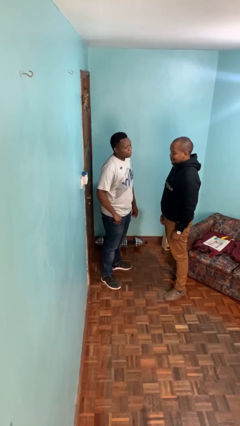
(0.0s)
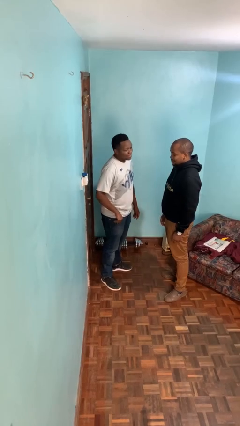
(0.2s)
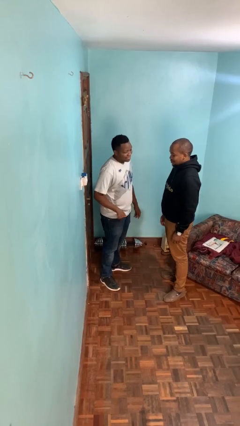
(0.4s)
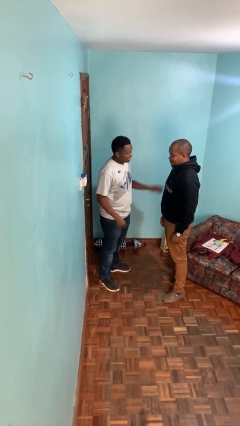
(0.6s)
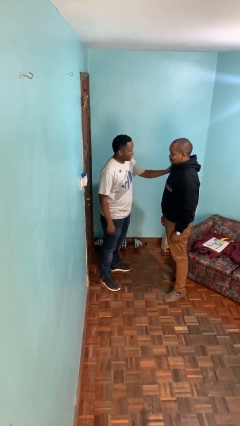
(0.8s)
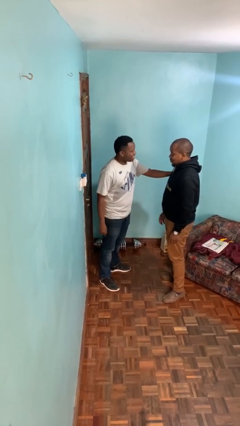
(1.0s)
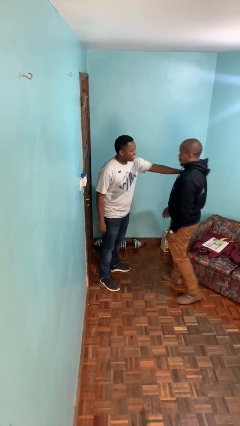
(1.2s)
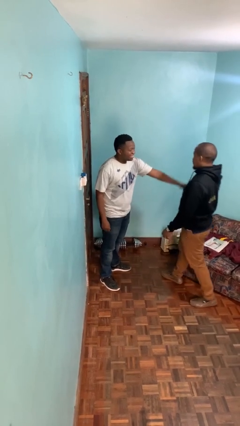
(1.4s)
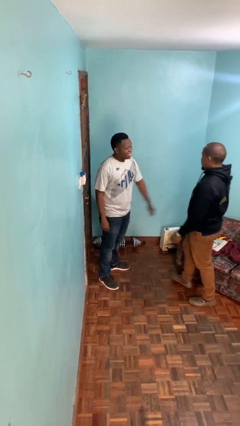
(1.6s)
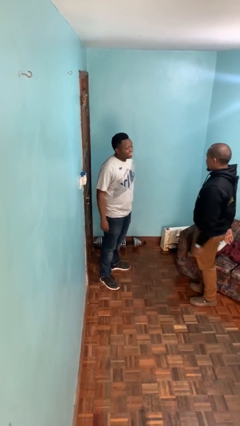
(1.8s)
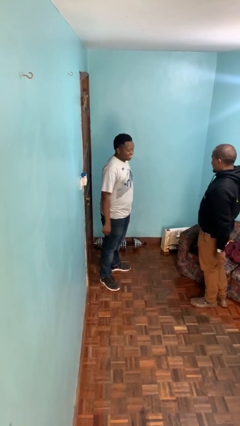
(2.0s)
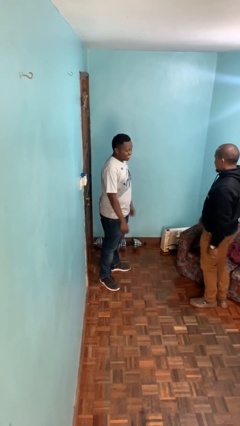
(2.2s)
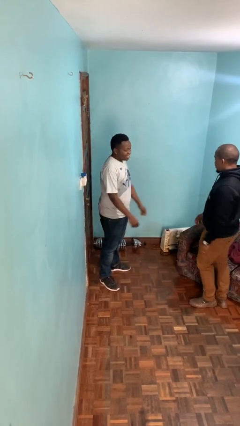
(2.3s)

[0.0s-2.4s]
person shoves person

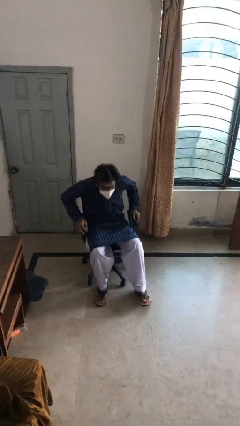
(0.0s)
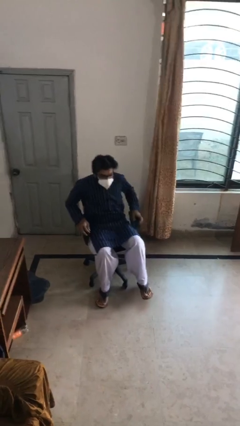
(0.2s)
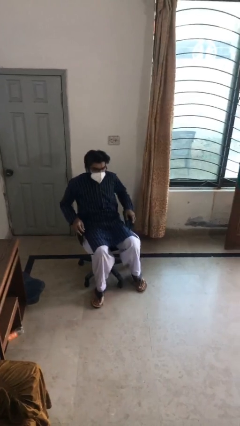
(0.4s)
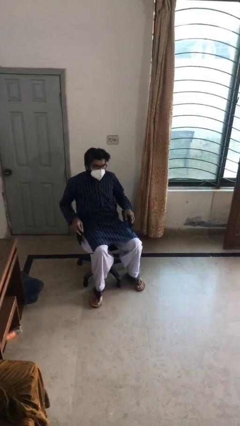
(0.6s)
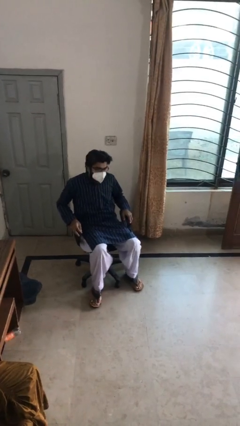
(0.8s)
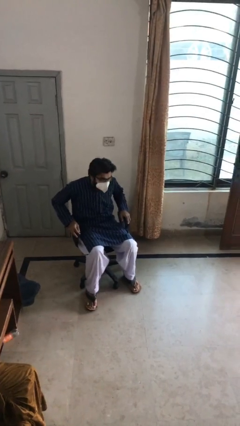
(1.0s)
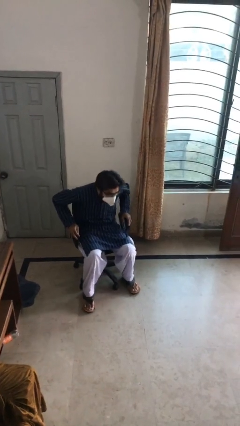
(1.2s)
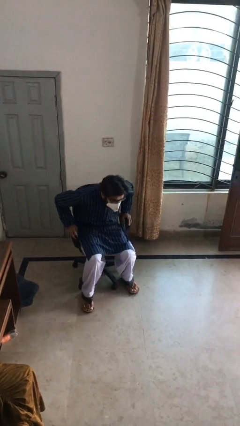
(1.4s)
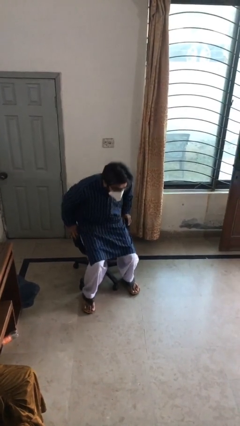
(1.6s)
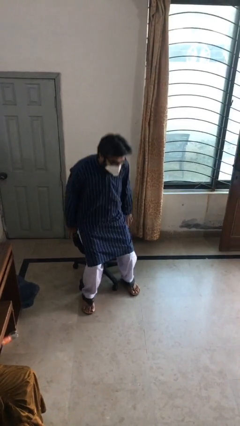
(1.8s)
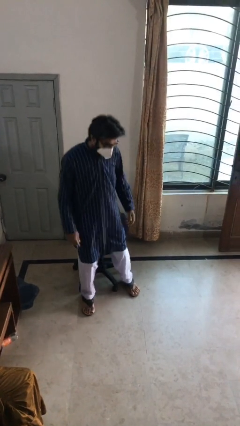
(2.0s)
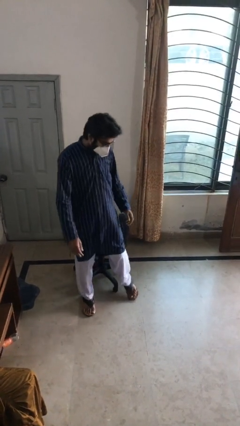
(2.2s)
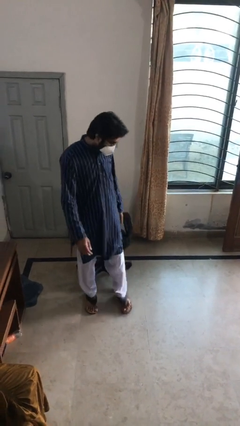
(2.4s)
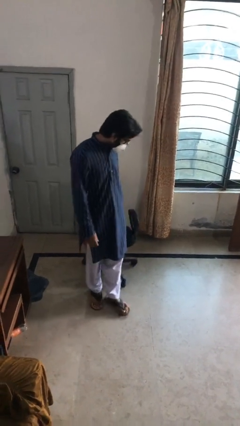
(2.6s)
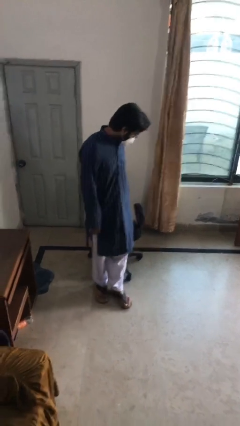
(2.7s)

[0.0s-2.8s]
person stands up

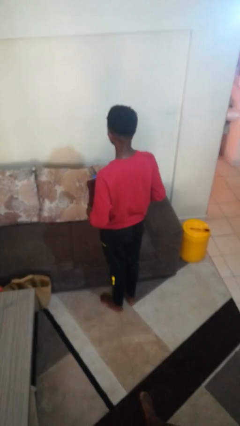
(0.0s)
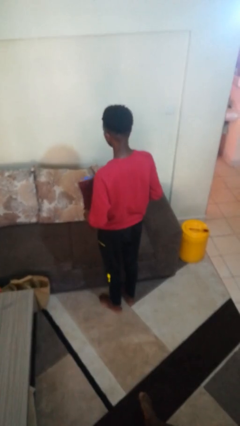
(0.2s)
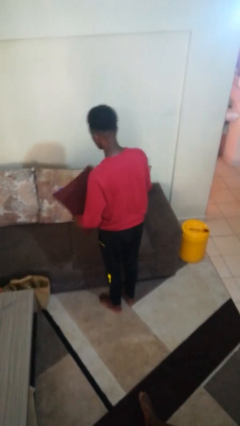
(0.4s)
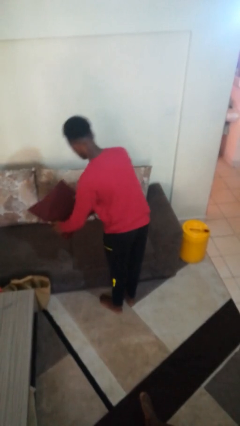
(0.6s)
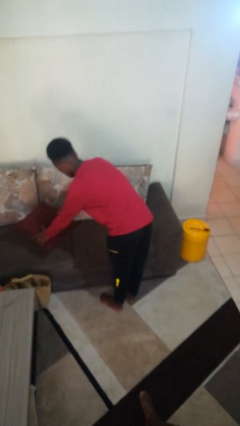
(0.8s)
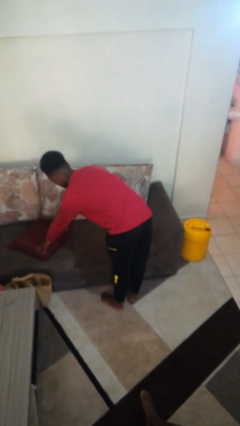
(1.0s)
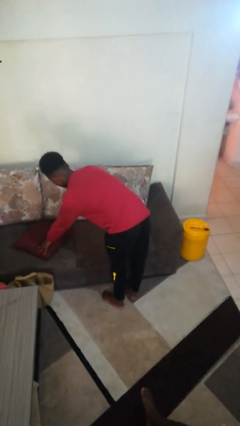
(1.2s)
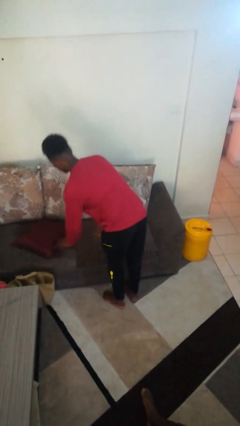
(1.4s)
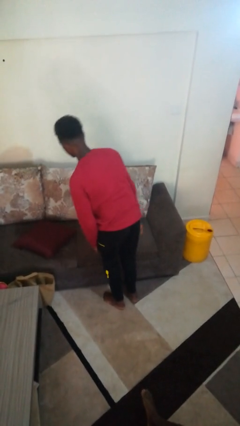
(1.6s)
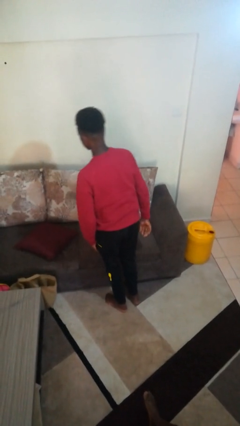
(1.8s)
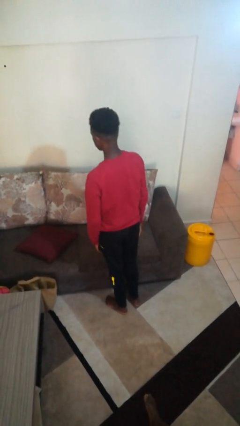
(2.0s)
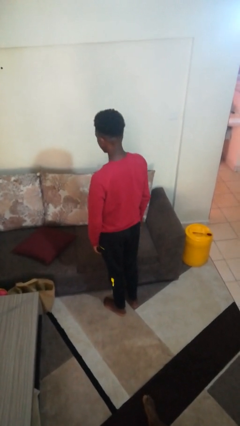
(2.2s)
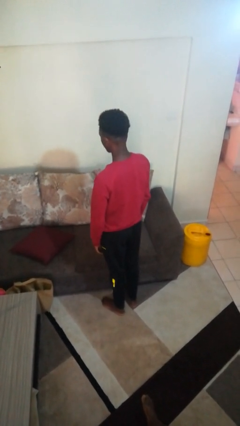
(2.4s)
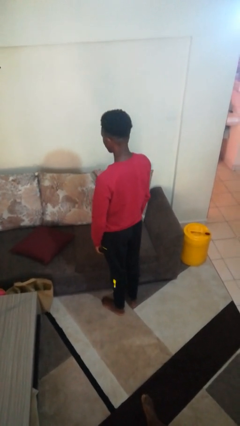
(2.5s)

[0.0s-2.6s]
person puts down object on couch

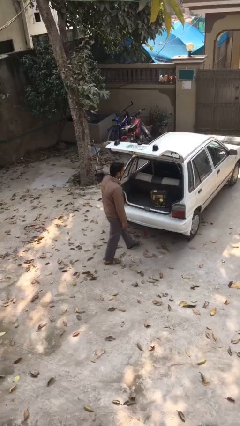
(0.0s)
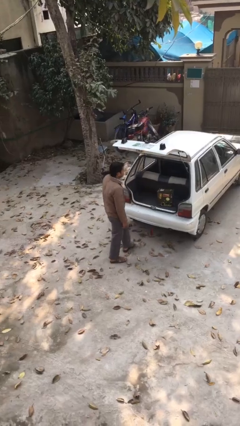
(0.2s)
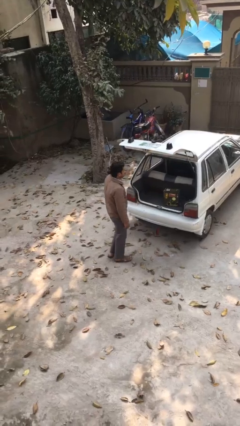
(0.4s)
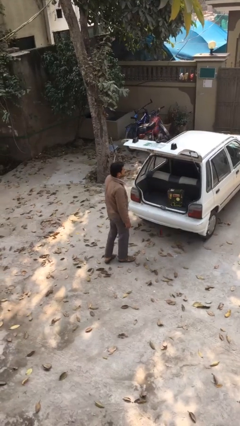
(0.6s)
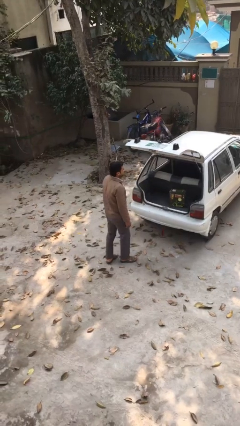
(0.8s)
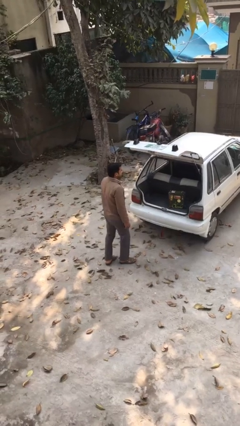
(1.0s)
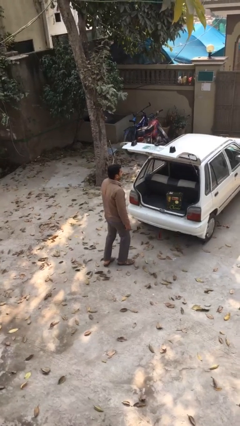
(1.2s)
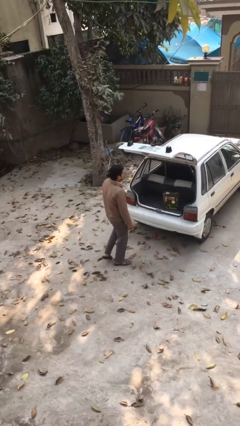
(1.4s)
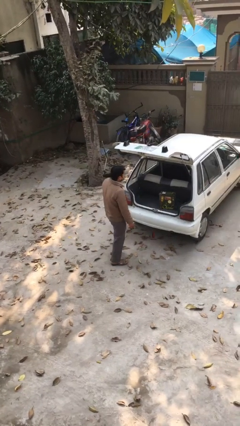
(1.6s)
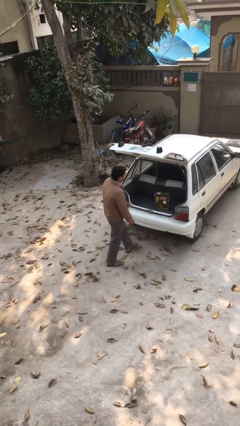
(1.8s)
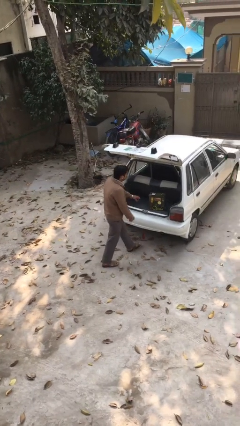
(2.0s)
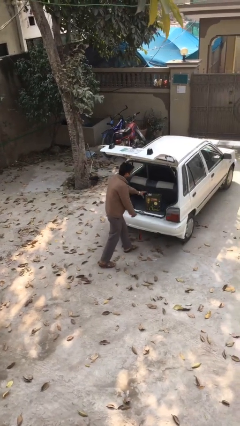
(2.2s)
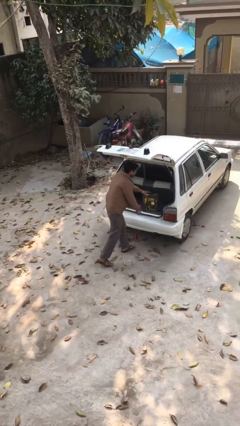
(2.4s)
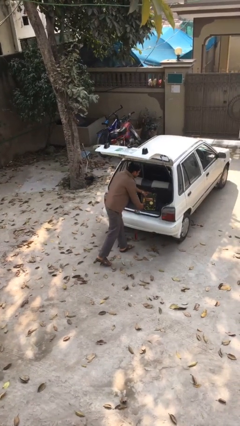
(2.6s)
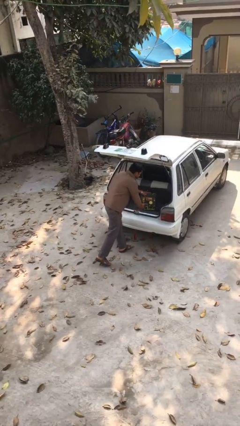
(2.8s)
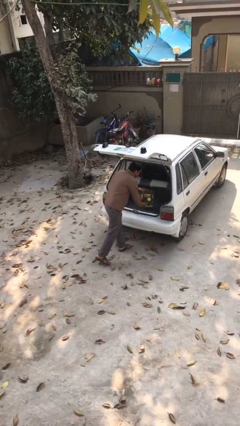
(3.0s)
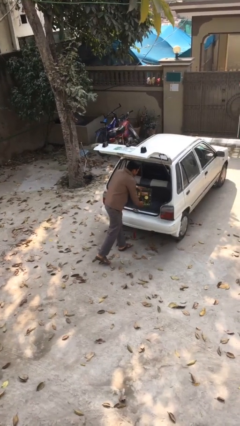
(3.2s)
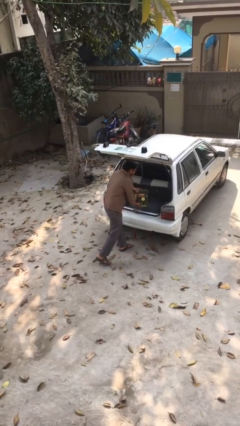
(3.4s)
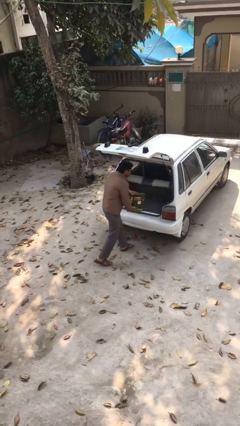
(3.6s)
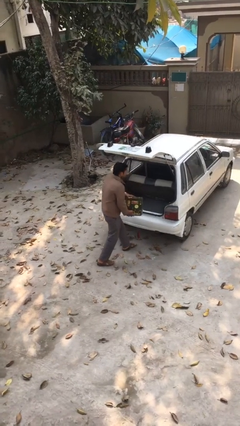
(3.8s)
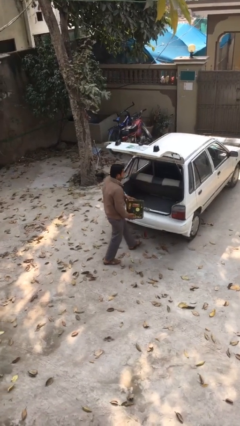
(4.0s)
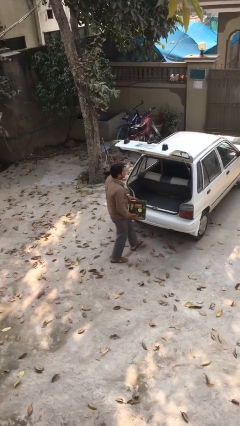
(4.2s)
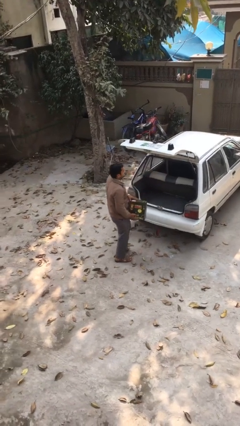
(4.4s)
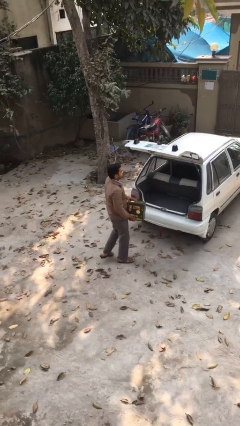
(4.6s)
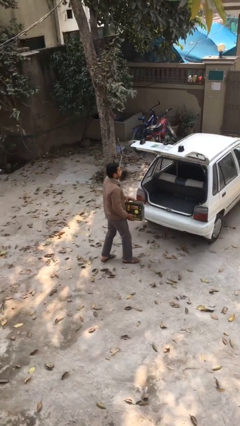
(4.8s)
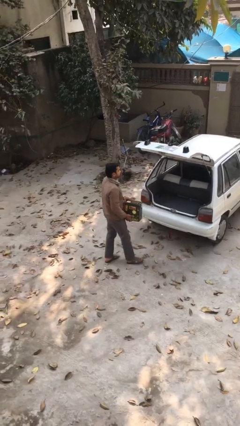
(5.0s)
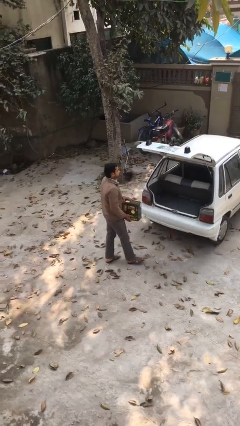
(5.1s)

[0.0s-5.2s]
person unloads car

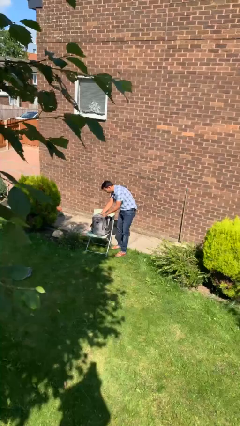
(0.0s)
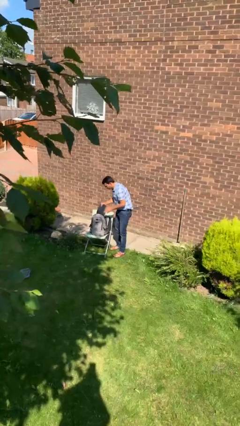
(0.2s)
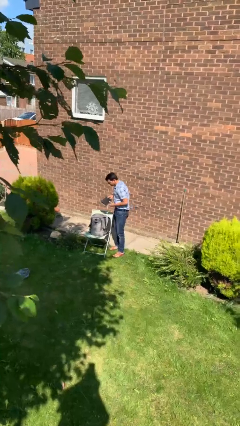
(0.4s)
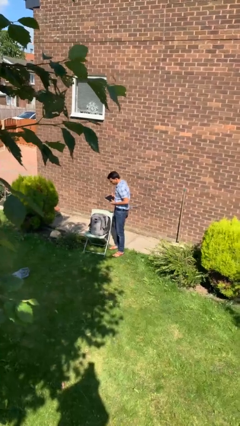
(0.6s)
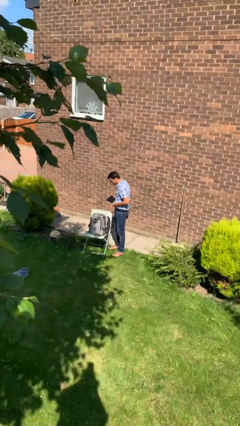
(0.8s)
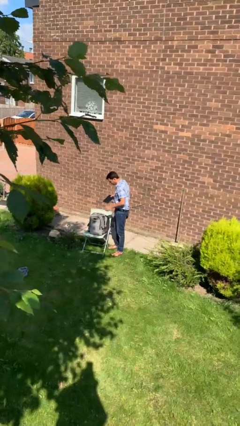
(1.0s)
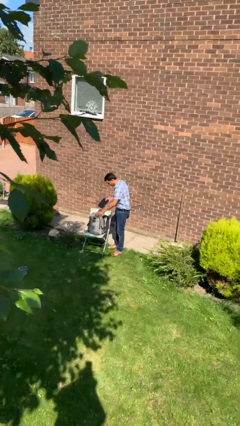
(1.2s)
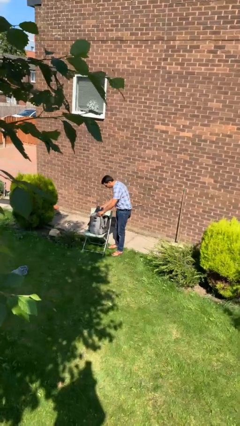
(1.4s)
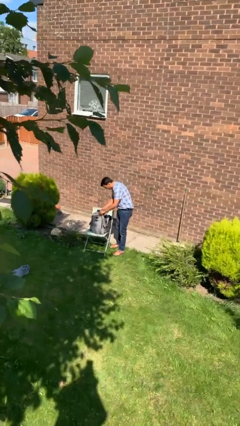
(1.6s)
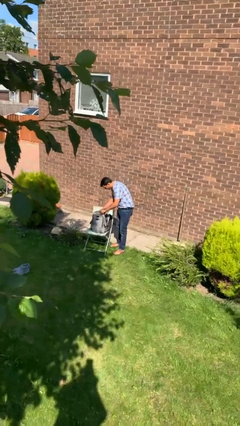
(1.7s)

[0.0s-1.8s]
person puts object into backpack

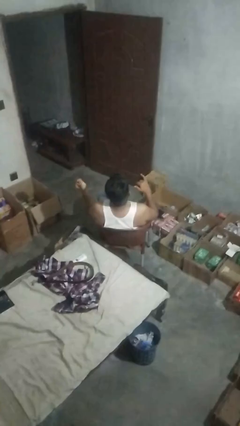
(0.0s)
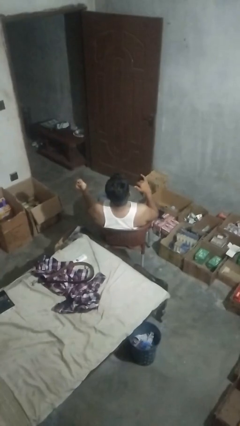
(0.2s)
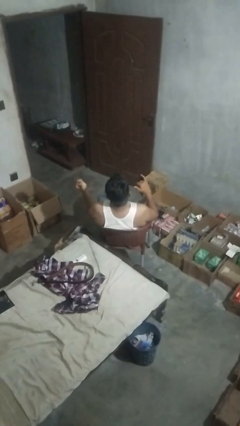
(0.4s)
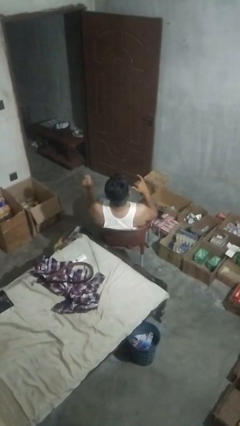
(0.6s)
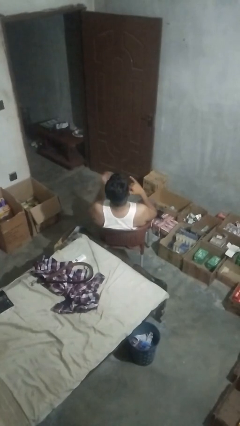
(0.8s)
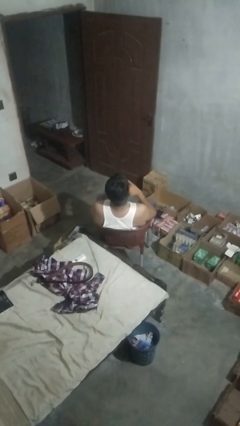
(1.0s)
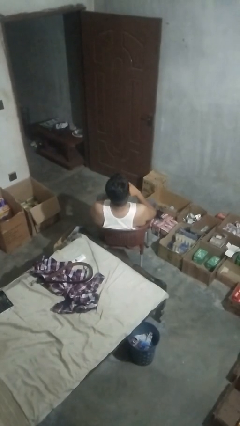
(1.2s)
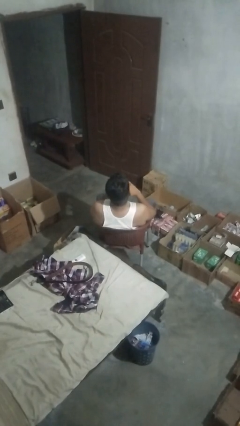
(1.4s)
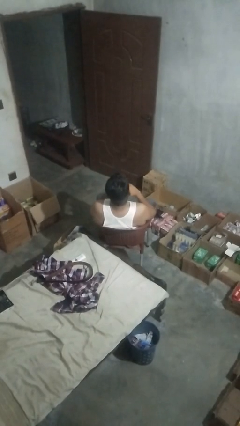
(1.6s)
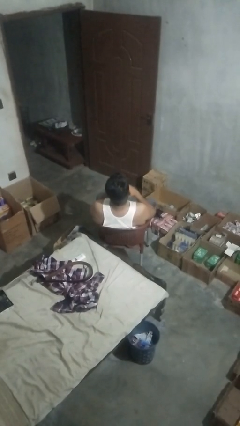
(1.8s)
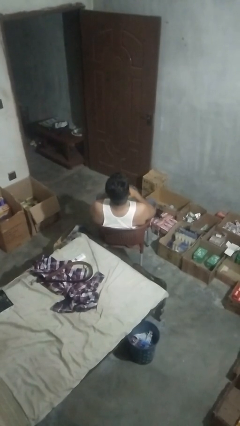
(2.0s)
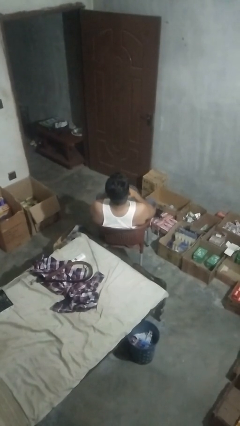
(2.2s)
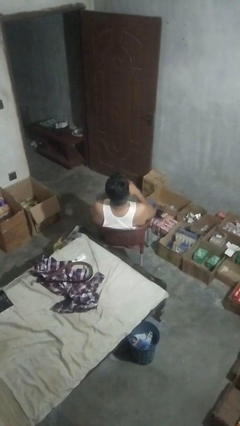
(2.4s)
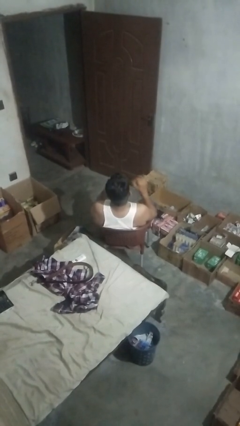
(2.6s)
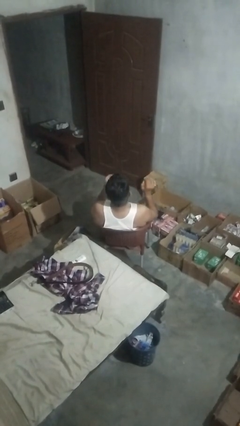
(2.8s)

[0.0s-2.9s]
person puts on ring

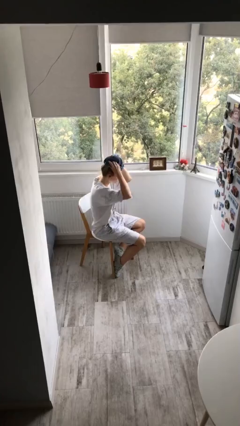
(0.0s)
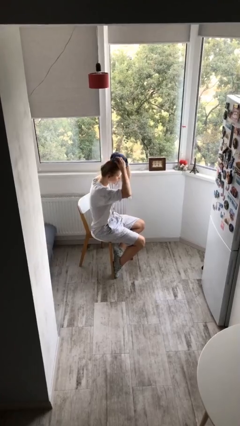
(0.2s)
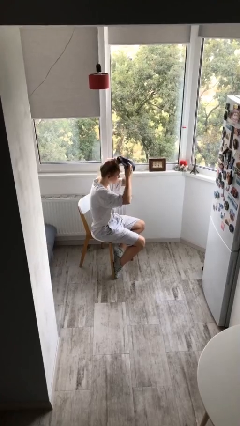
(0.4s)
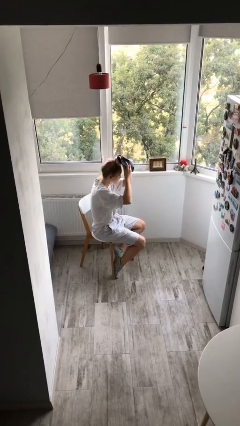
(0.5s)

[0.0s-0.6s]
person takes off hat
